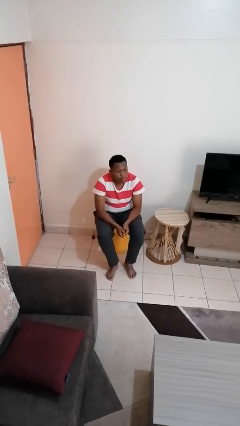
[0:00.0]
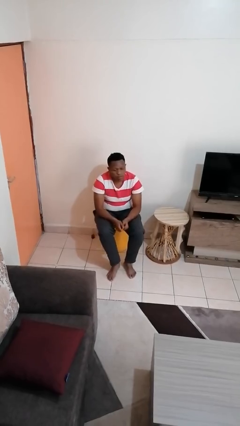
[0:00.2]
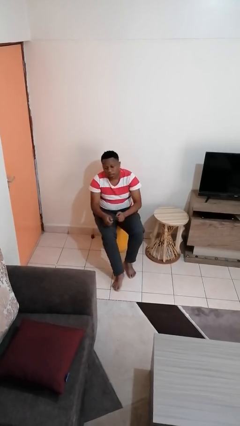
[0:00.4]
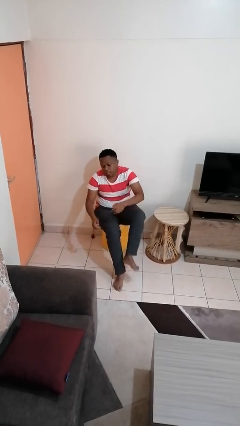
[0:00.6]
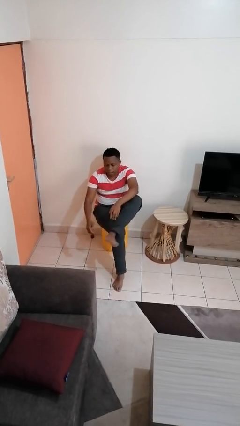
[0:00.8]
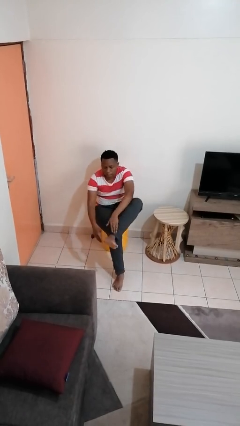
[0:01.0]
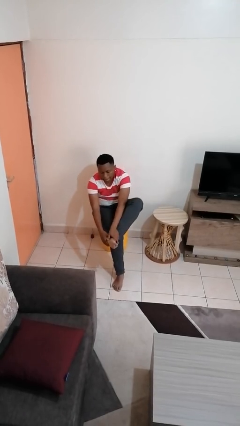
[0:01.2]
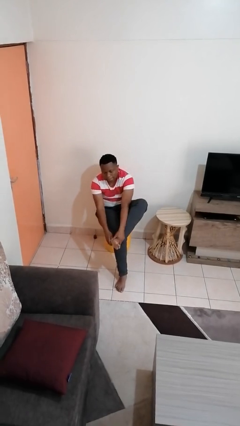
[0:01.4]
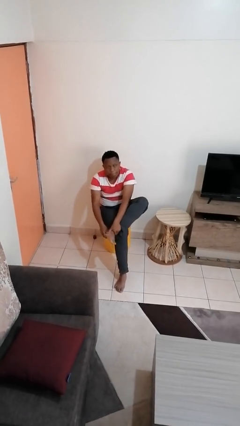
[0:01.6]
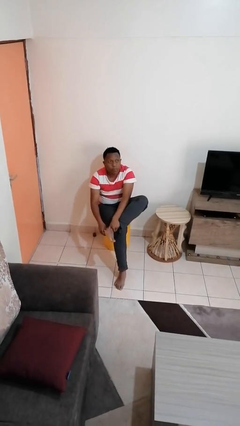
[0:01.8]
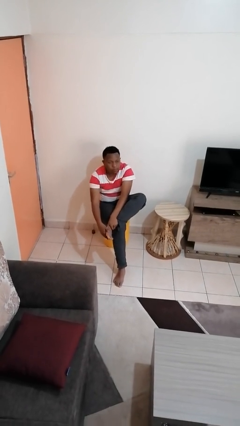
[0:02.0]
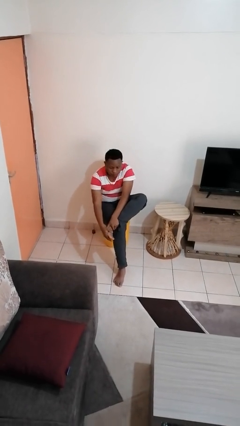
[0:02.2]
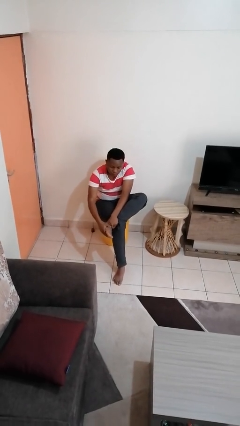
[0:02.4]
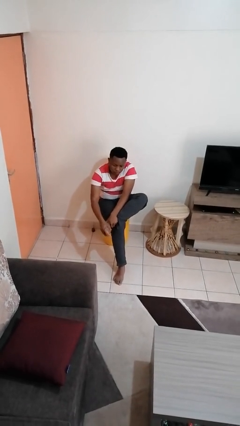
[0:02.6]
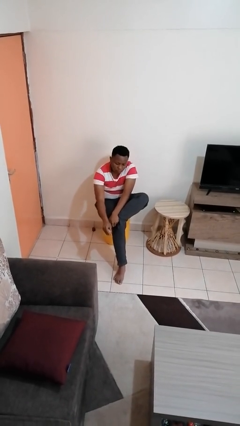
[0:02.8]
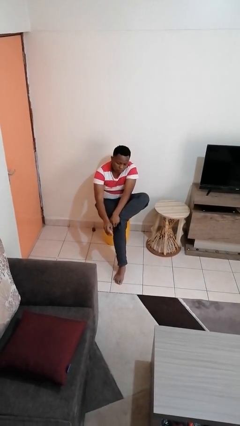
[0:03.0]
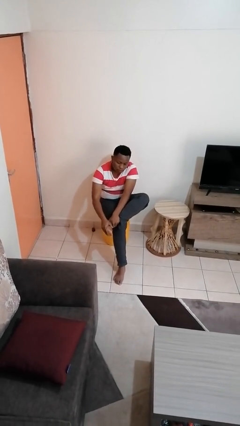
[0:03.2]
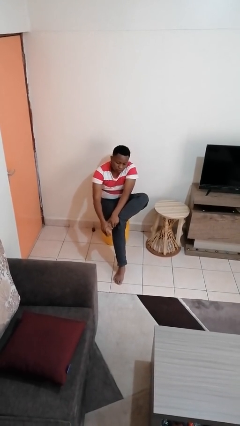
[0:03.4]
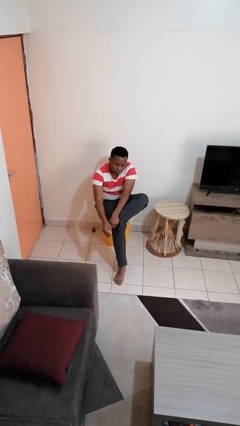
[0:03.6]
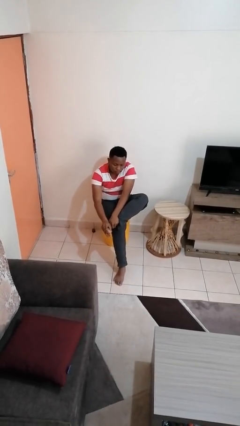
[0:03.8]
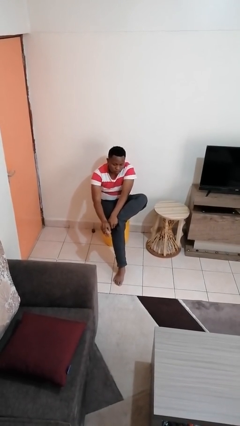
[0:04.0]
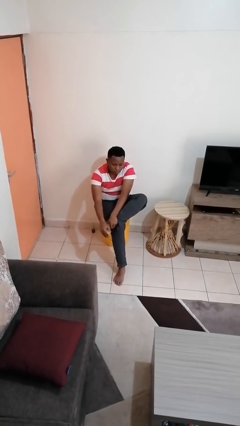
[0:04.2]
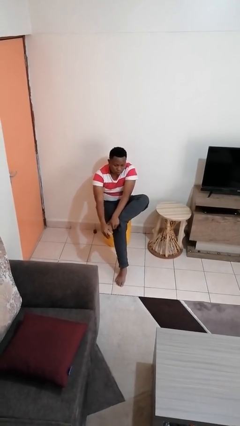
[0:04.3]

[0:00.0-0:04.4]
person rubs foot

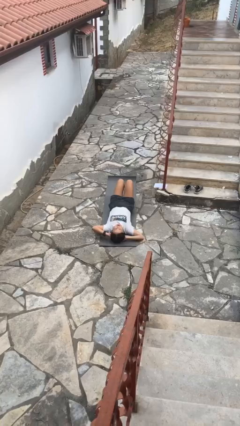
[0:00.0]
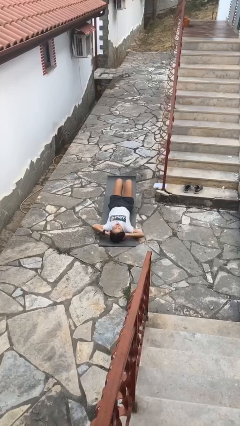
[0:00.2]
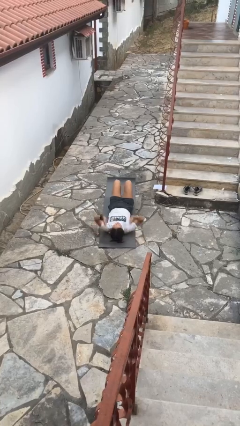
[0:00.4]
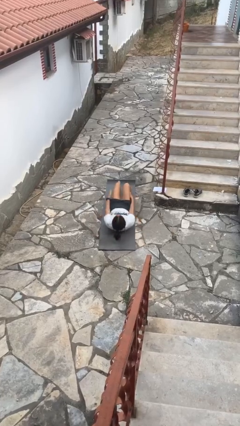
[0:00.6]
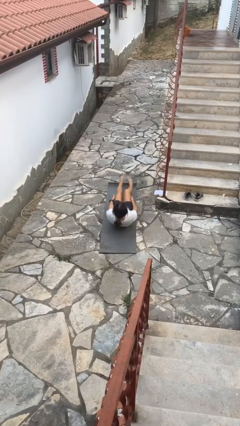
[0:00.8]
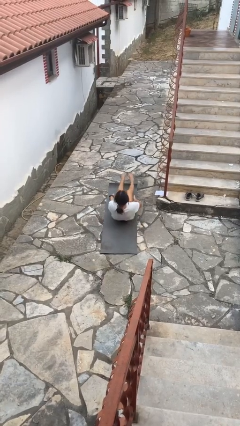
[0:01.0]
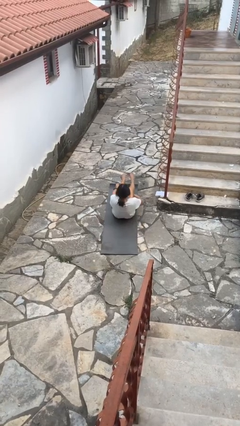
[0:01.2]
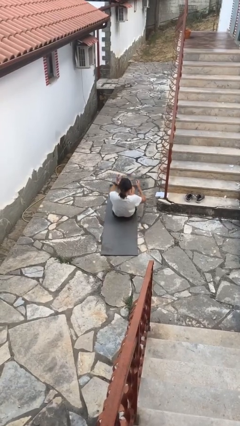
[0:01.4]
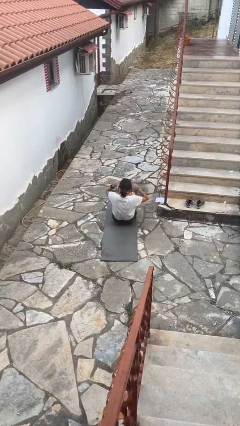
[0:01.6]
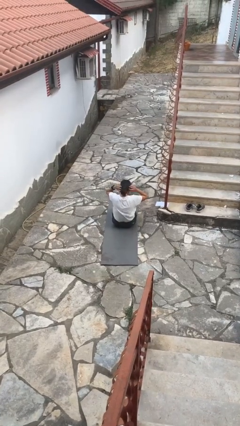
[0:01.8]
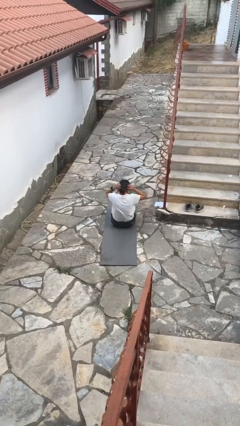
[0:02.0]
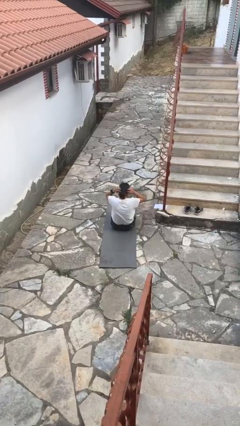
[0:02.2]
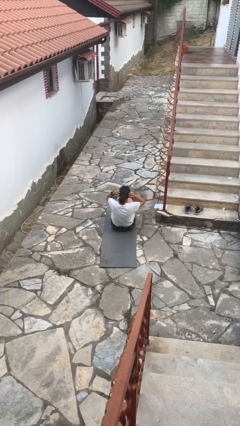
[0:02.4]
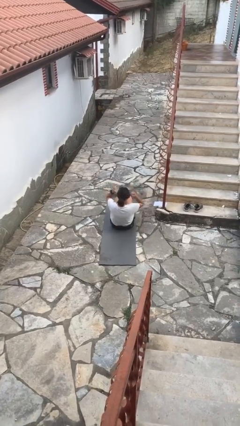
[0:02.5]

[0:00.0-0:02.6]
person exercises with situp

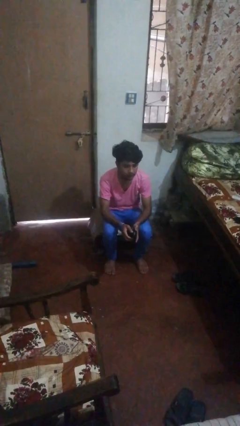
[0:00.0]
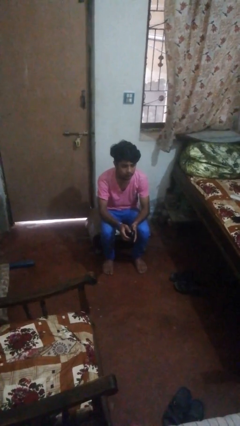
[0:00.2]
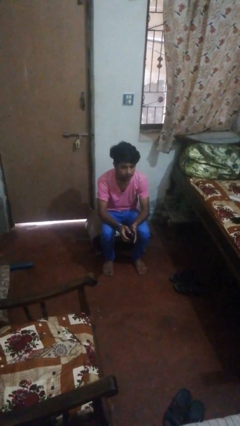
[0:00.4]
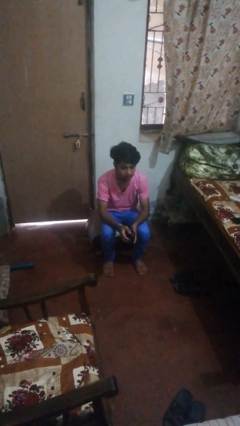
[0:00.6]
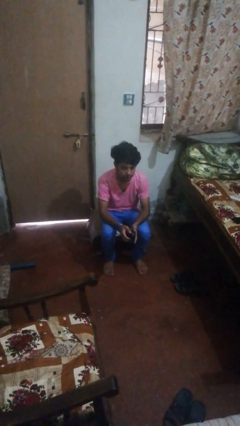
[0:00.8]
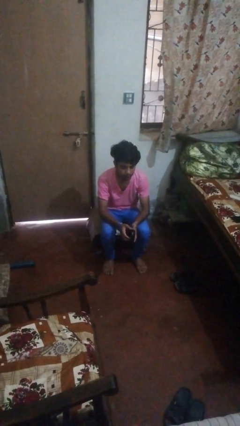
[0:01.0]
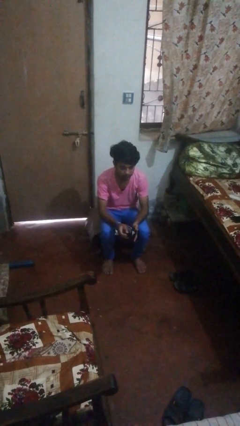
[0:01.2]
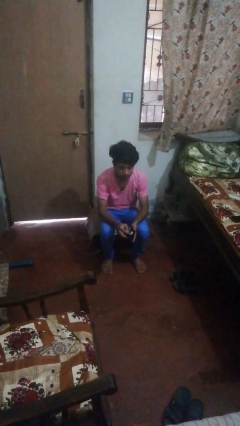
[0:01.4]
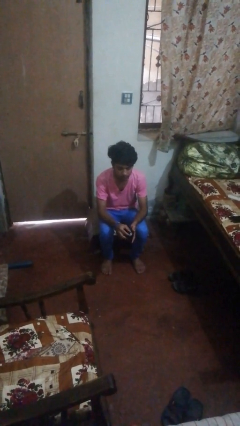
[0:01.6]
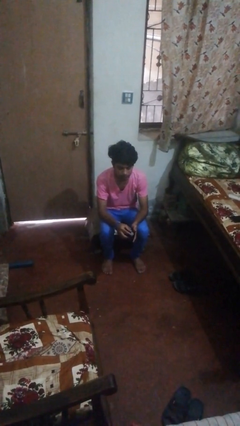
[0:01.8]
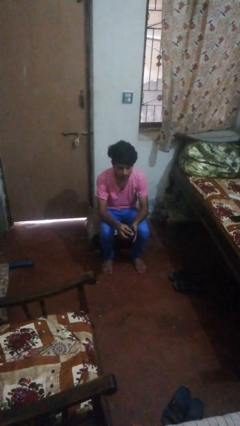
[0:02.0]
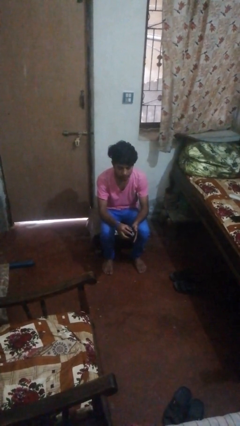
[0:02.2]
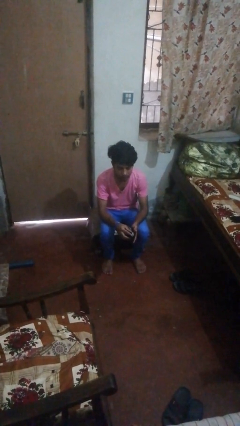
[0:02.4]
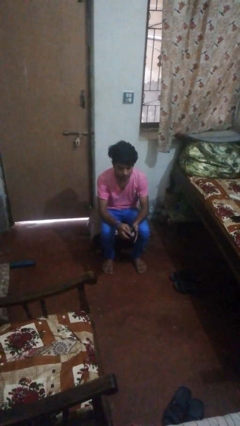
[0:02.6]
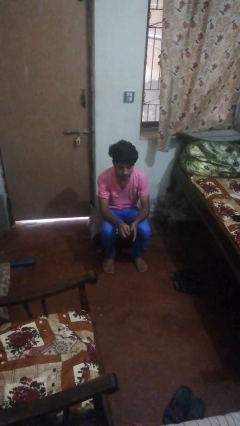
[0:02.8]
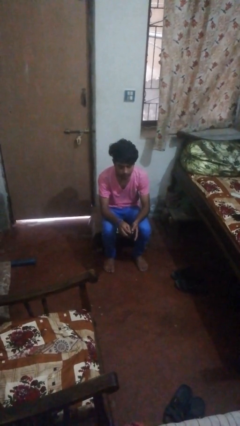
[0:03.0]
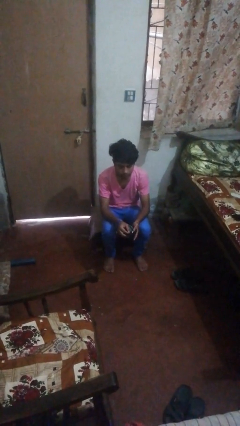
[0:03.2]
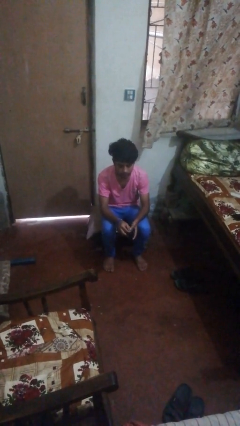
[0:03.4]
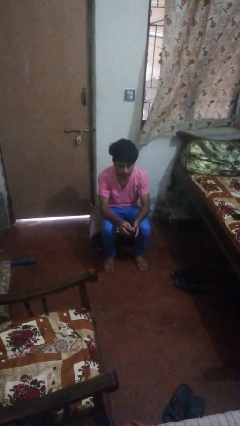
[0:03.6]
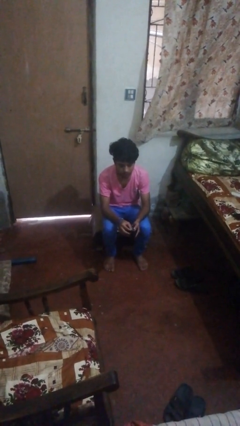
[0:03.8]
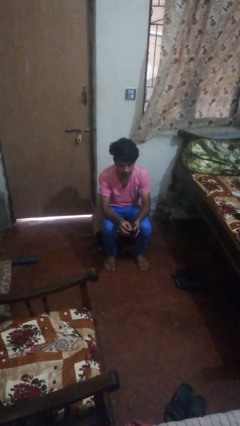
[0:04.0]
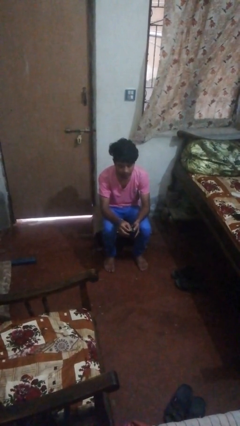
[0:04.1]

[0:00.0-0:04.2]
person searches in purse

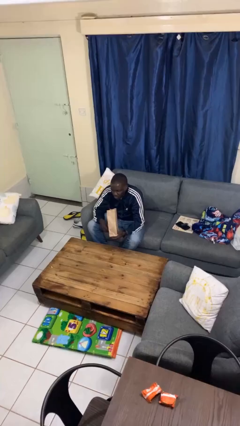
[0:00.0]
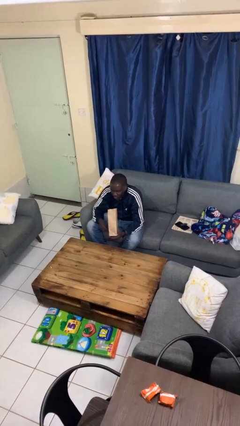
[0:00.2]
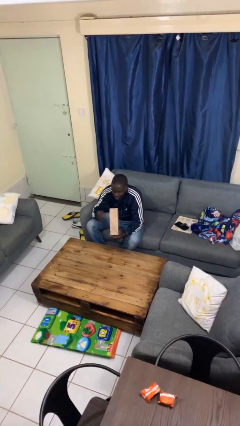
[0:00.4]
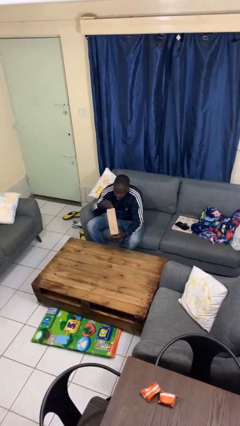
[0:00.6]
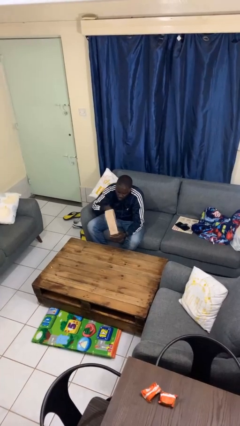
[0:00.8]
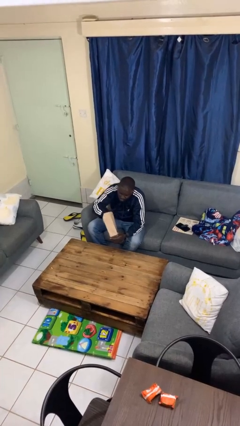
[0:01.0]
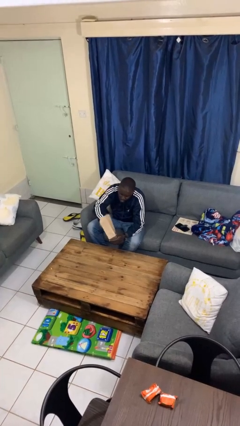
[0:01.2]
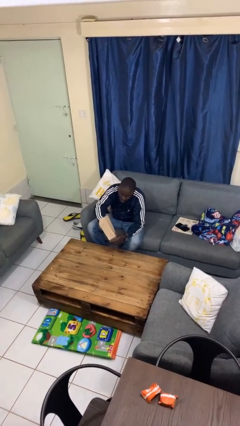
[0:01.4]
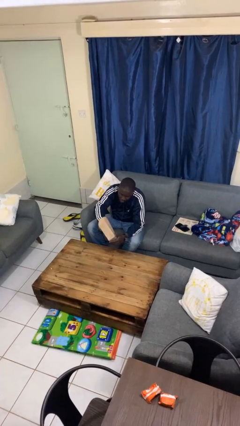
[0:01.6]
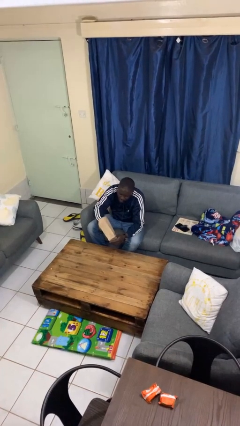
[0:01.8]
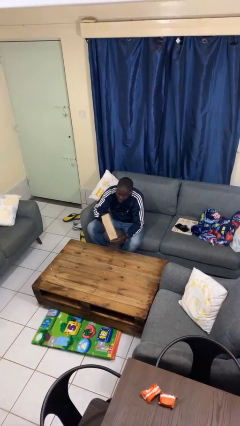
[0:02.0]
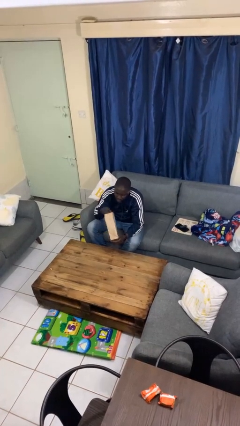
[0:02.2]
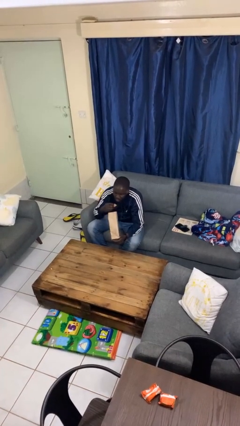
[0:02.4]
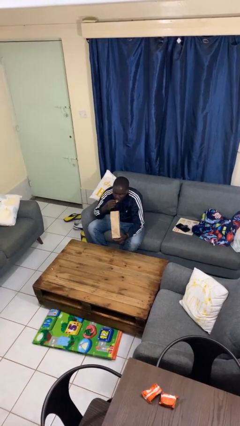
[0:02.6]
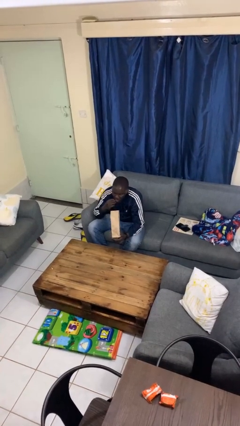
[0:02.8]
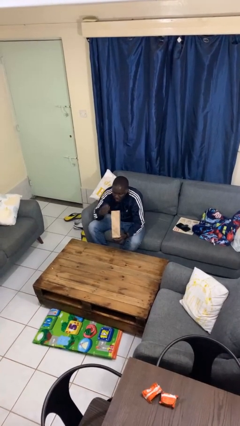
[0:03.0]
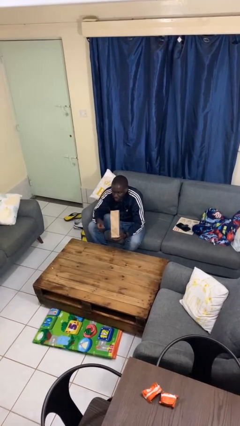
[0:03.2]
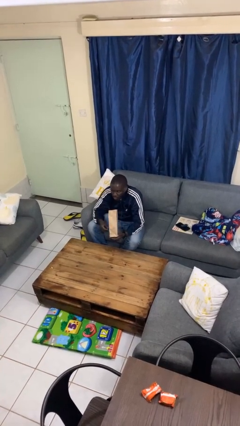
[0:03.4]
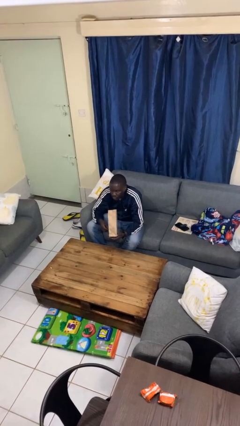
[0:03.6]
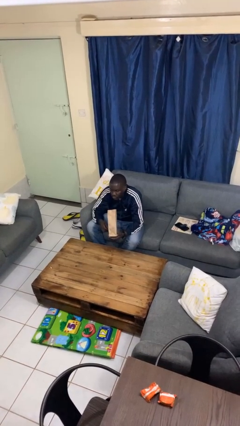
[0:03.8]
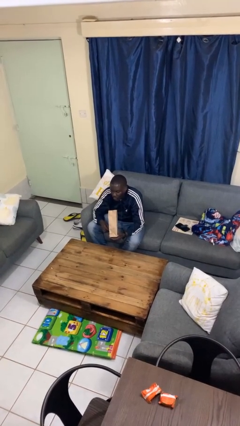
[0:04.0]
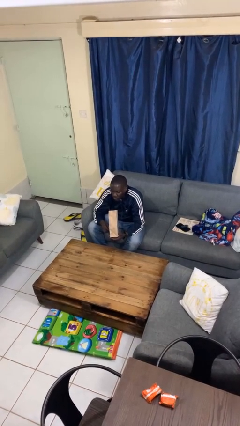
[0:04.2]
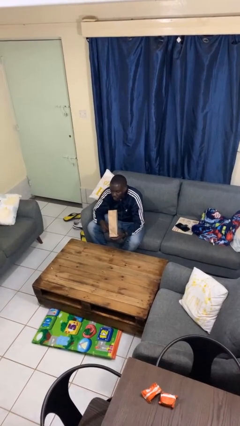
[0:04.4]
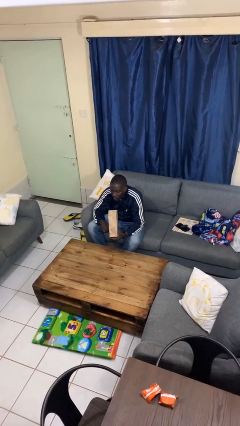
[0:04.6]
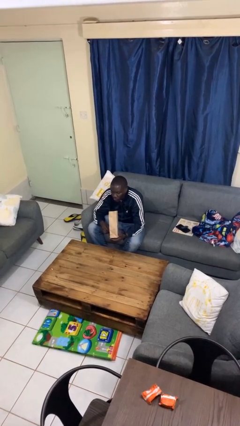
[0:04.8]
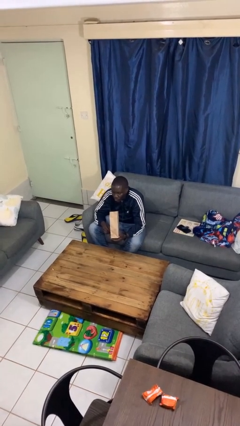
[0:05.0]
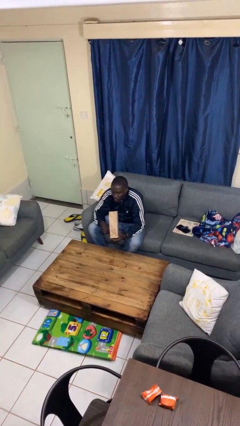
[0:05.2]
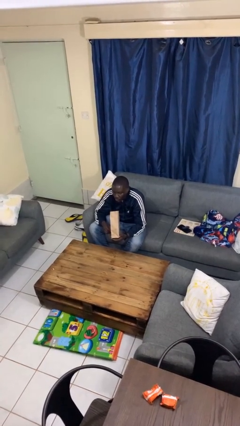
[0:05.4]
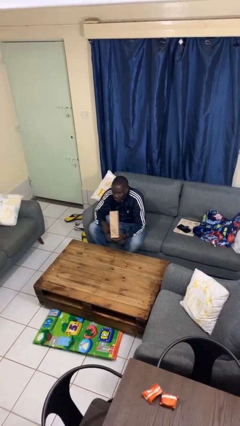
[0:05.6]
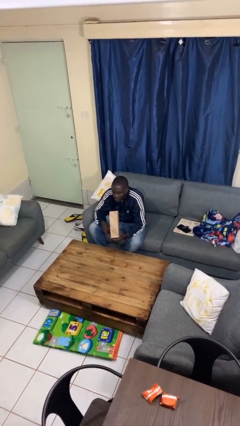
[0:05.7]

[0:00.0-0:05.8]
person eats snack from bag

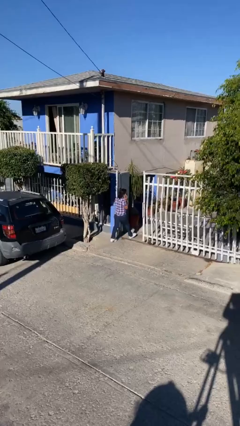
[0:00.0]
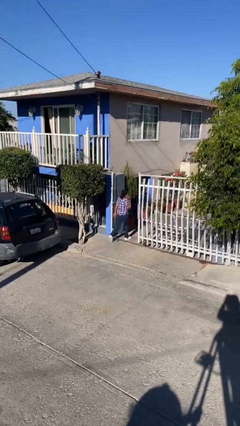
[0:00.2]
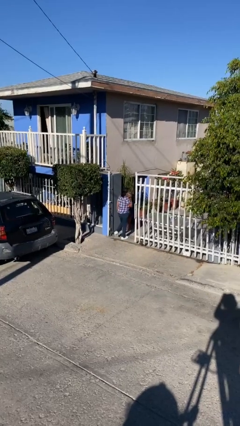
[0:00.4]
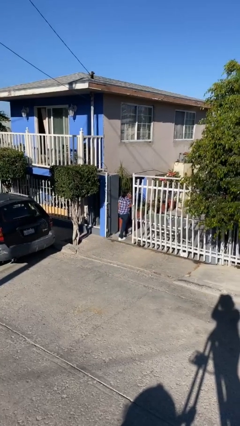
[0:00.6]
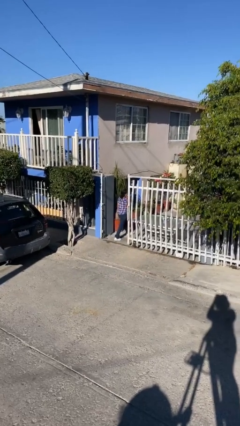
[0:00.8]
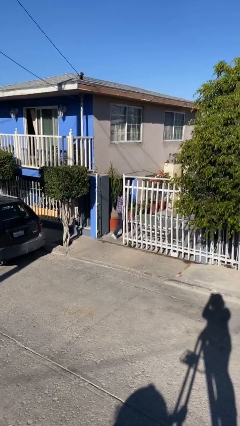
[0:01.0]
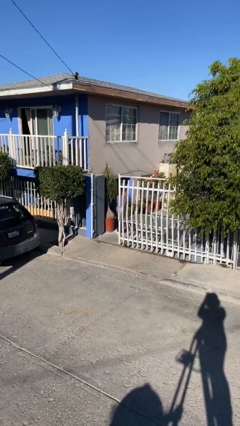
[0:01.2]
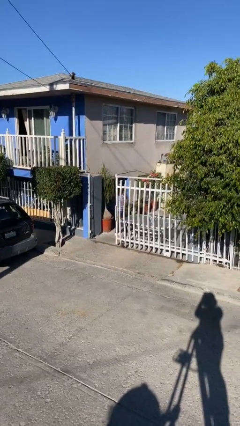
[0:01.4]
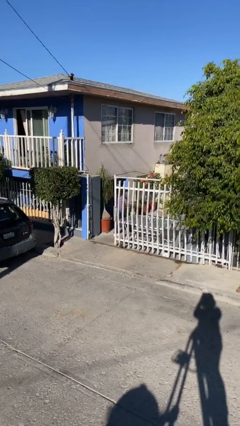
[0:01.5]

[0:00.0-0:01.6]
person exits scene through structure
